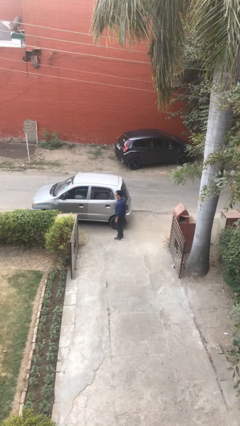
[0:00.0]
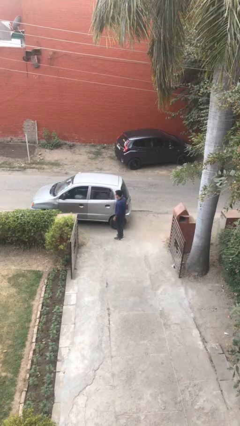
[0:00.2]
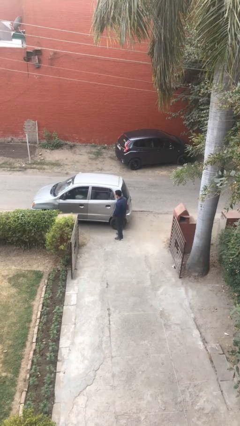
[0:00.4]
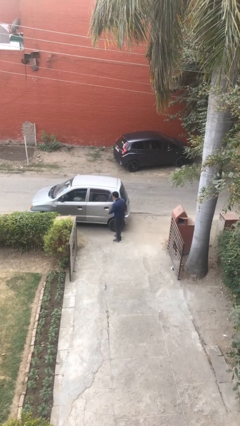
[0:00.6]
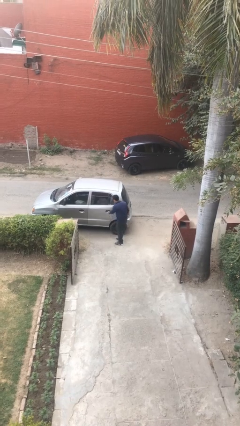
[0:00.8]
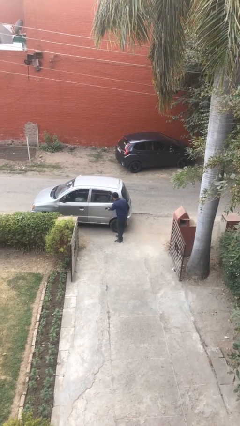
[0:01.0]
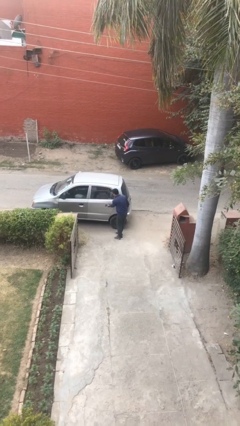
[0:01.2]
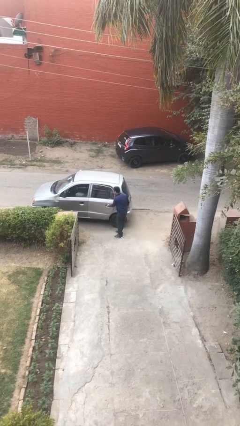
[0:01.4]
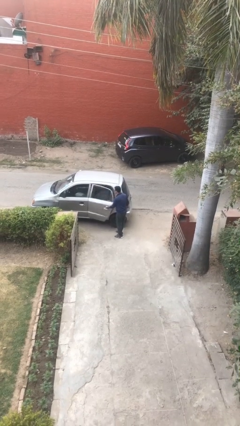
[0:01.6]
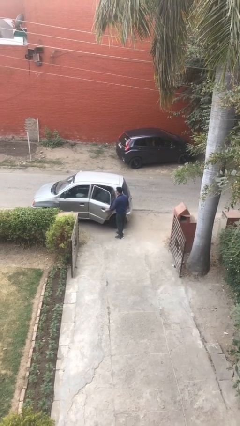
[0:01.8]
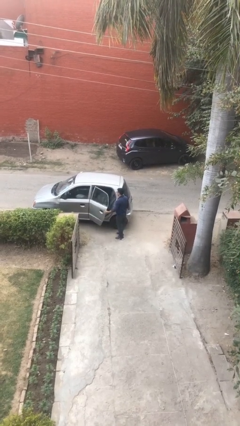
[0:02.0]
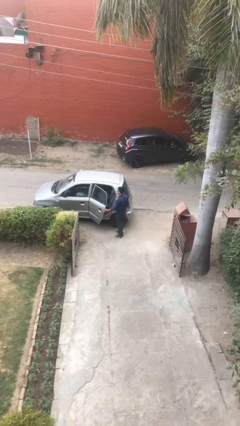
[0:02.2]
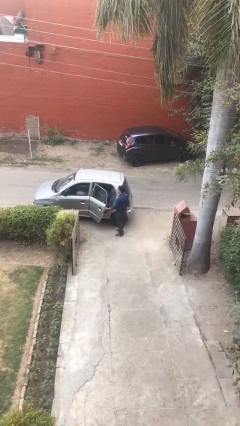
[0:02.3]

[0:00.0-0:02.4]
person opens car door

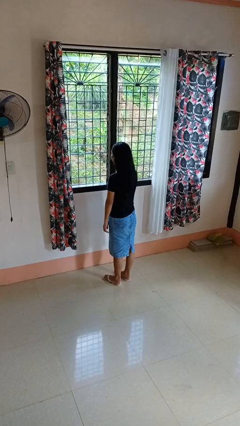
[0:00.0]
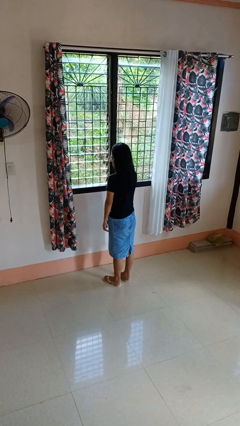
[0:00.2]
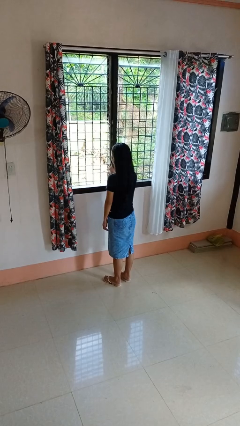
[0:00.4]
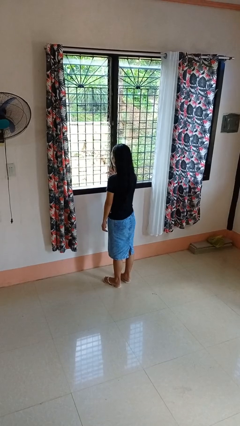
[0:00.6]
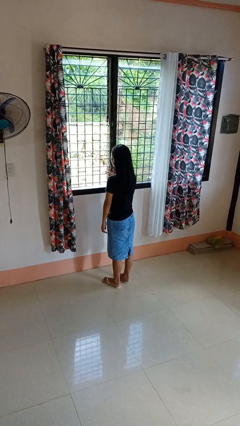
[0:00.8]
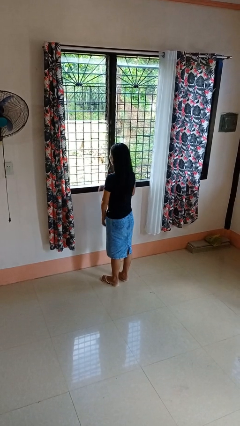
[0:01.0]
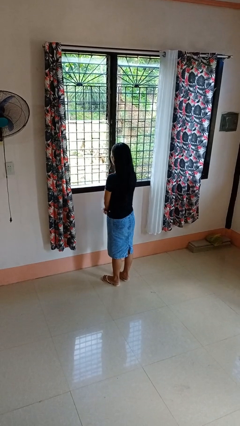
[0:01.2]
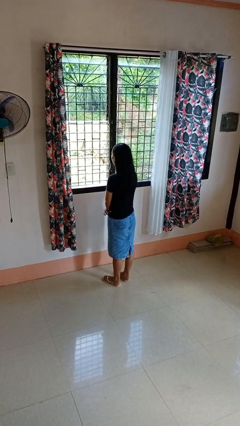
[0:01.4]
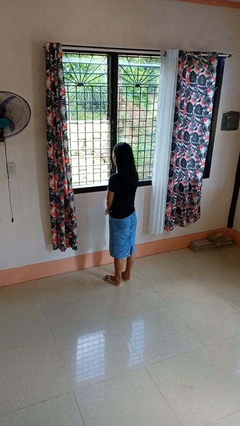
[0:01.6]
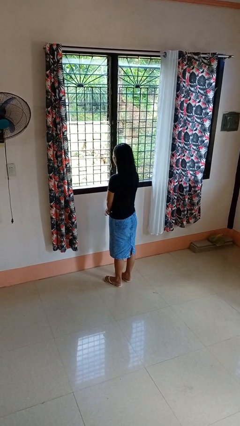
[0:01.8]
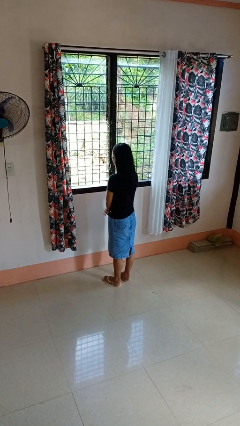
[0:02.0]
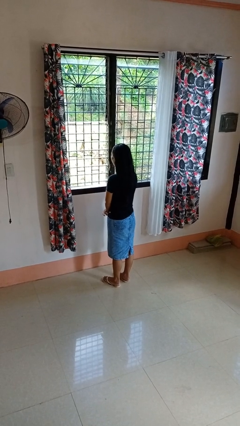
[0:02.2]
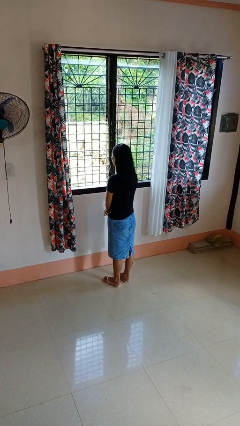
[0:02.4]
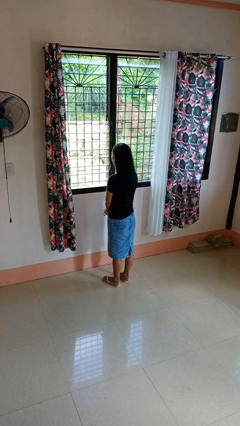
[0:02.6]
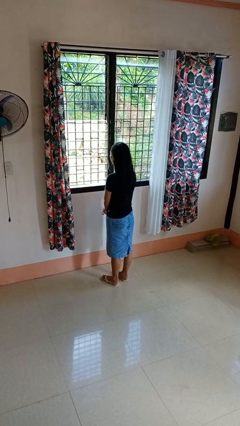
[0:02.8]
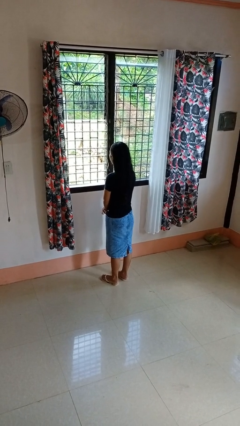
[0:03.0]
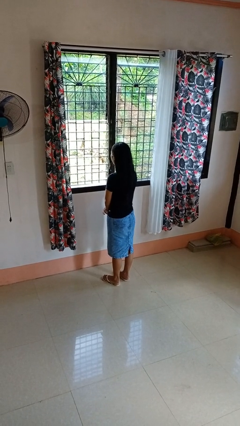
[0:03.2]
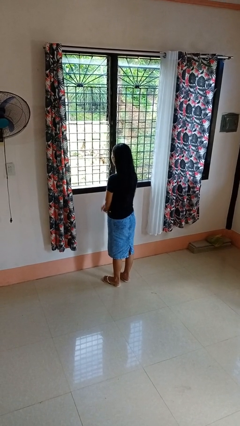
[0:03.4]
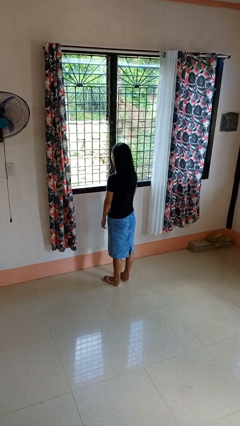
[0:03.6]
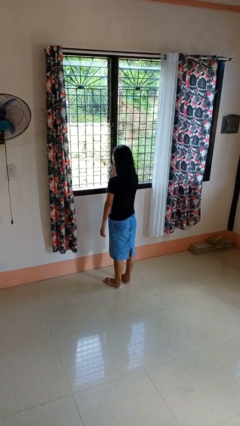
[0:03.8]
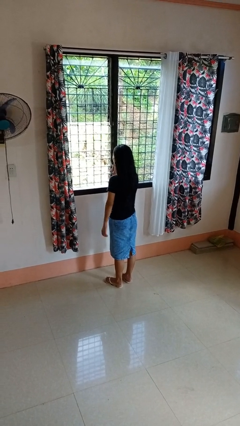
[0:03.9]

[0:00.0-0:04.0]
person opens home window

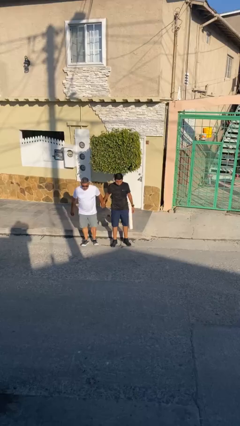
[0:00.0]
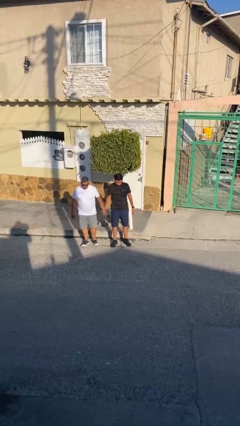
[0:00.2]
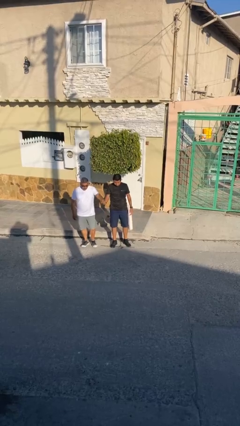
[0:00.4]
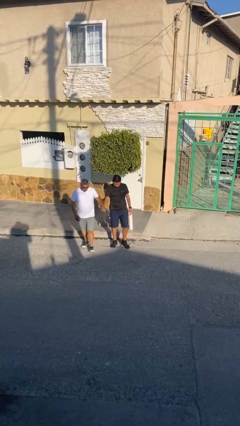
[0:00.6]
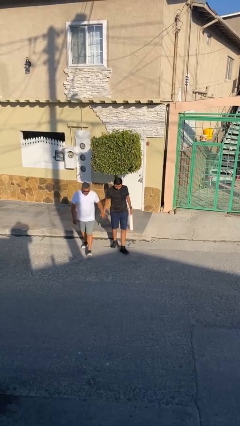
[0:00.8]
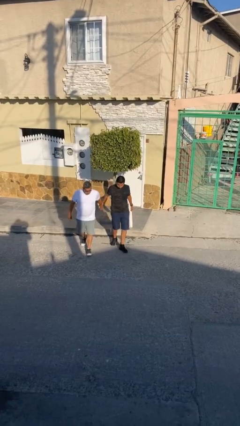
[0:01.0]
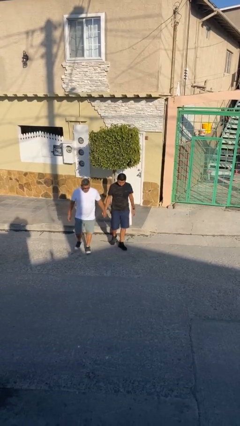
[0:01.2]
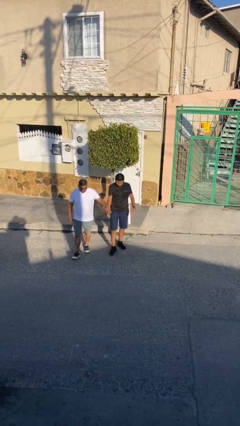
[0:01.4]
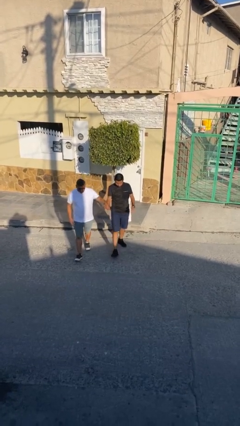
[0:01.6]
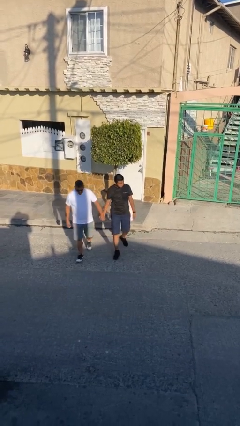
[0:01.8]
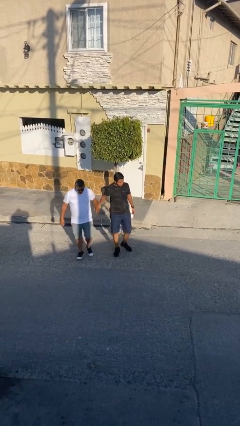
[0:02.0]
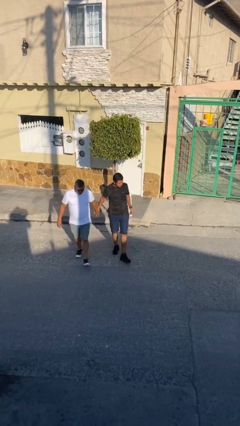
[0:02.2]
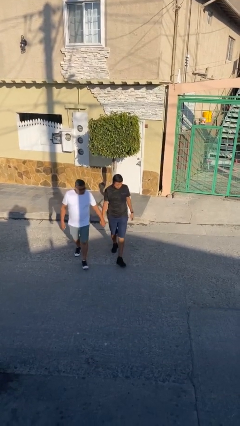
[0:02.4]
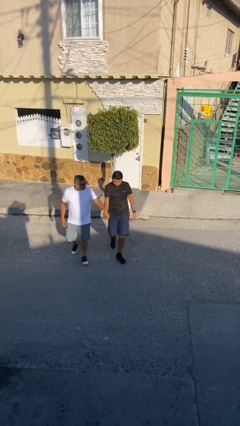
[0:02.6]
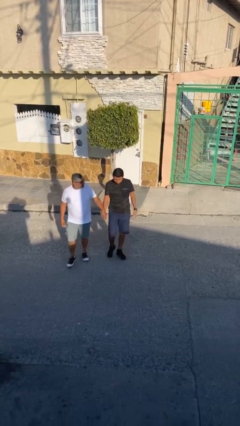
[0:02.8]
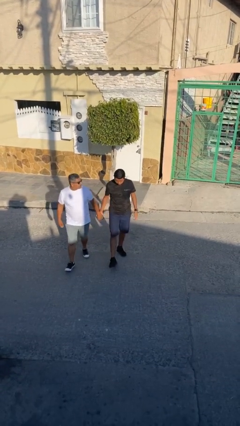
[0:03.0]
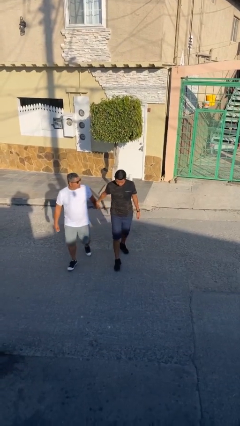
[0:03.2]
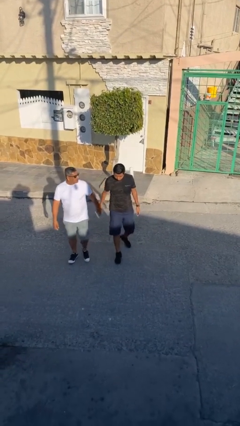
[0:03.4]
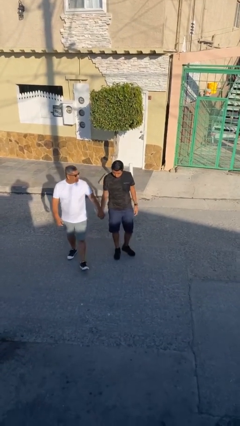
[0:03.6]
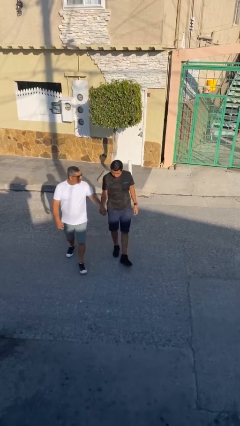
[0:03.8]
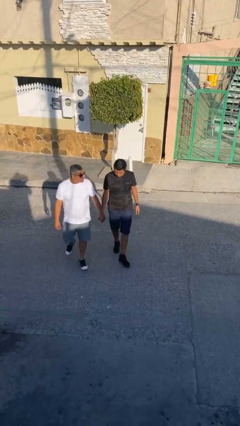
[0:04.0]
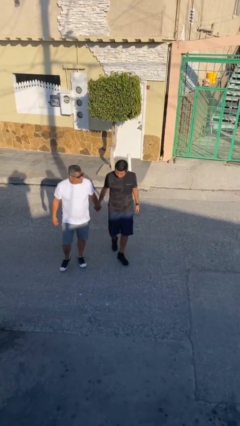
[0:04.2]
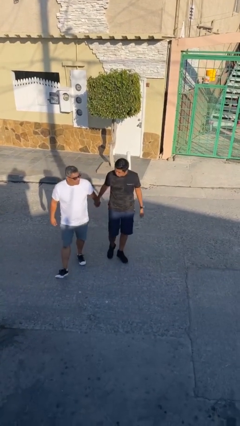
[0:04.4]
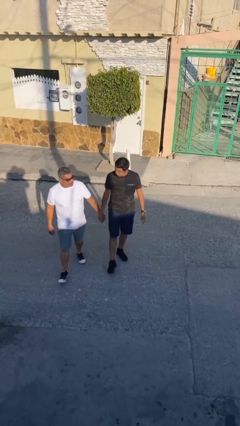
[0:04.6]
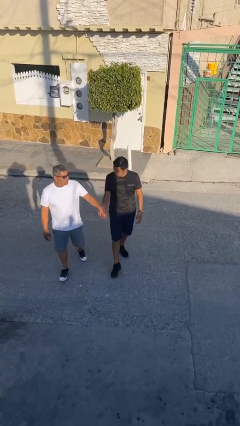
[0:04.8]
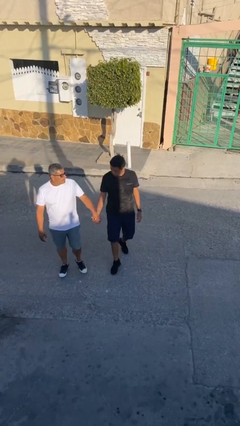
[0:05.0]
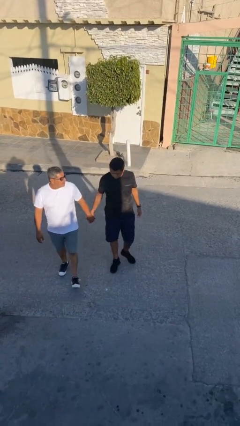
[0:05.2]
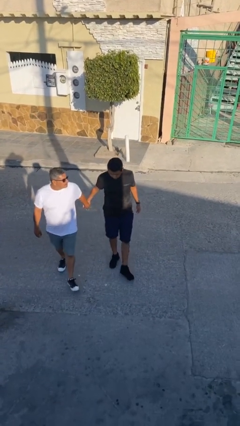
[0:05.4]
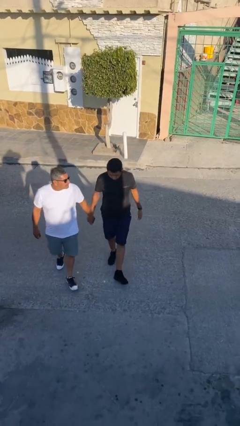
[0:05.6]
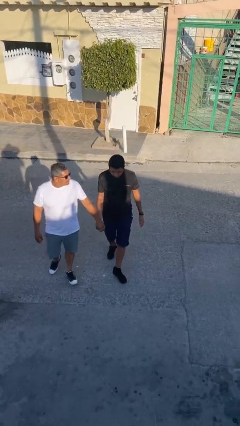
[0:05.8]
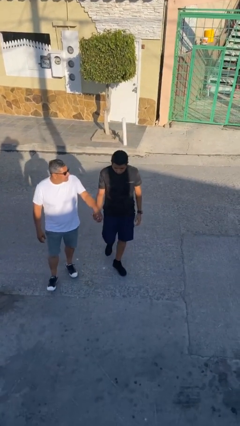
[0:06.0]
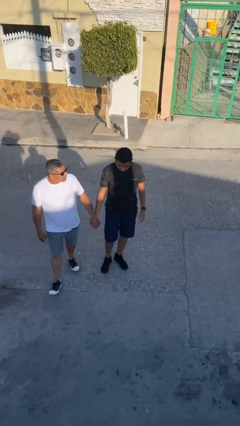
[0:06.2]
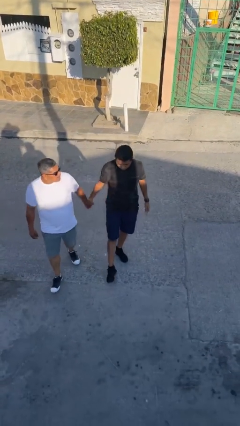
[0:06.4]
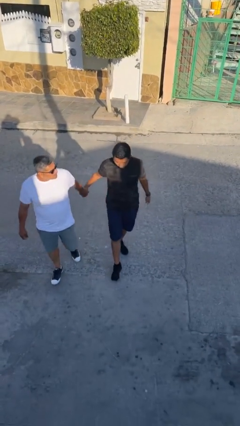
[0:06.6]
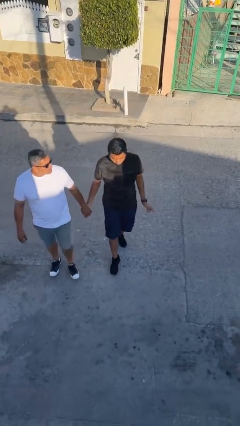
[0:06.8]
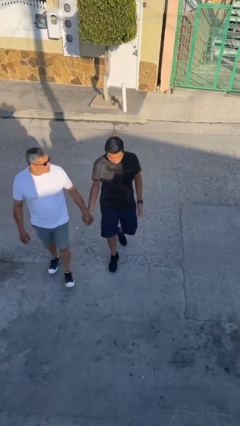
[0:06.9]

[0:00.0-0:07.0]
person holds hand

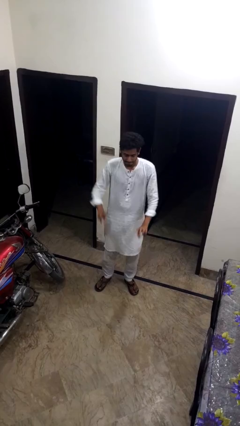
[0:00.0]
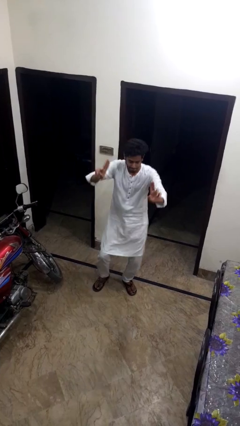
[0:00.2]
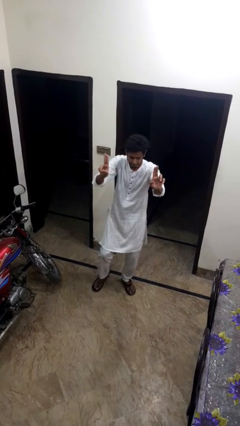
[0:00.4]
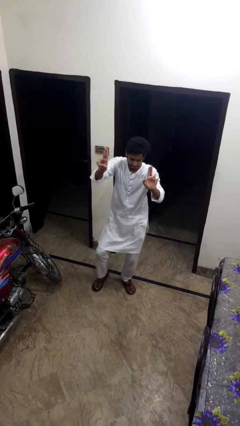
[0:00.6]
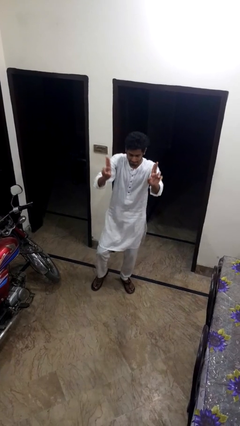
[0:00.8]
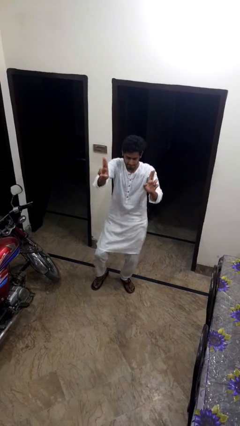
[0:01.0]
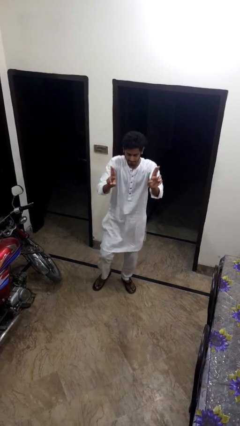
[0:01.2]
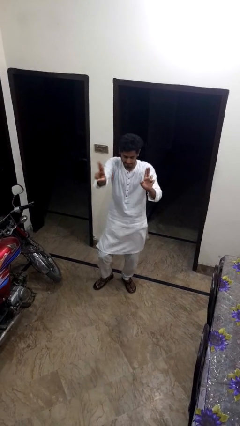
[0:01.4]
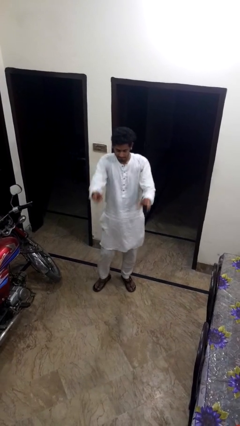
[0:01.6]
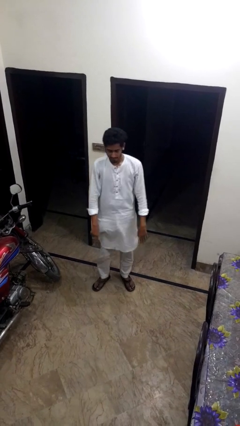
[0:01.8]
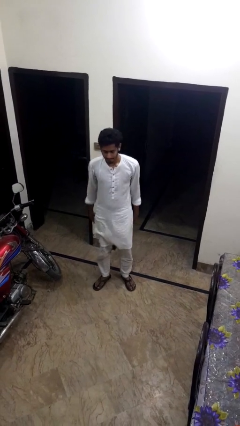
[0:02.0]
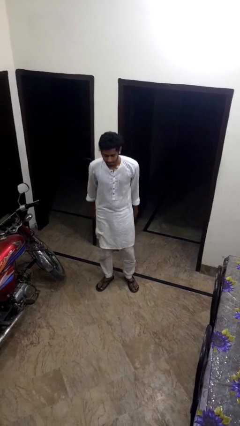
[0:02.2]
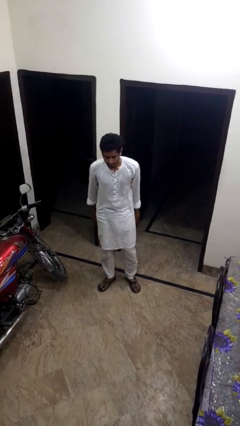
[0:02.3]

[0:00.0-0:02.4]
person dances in place

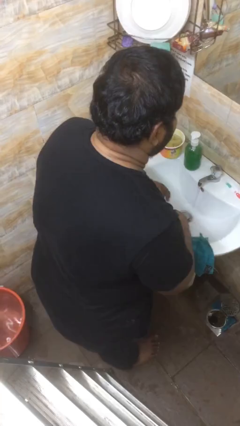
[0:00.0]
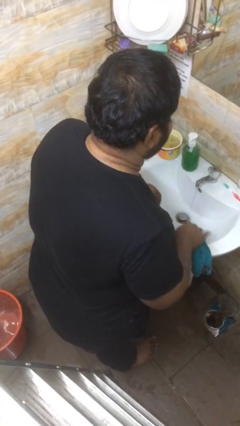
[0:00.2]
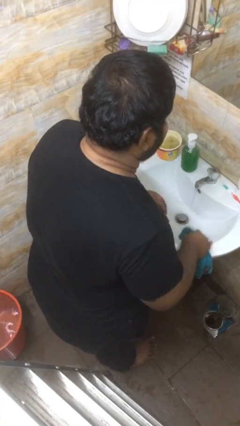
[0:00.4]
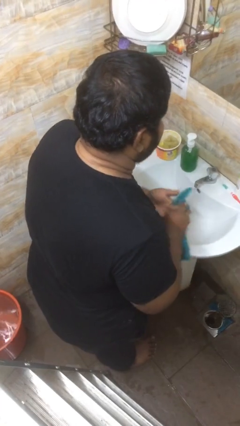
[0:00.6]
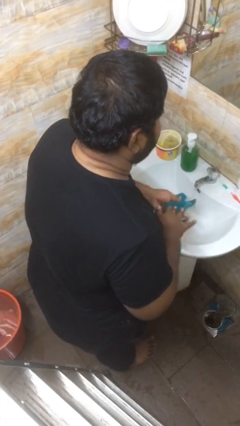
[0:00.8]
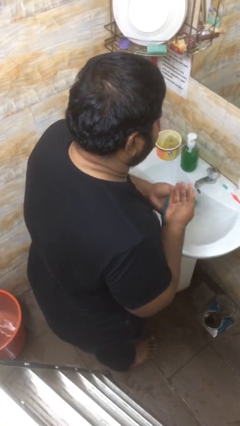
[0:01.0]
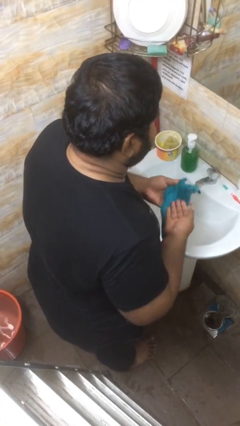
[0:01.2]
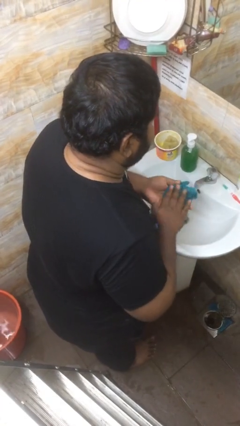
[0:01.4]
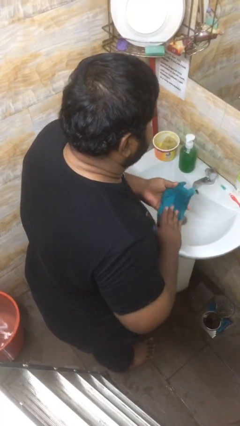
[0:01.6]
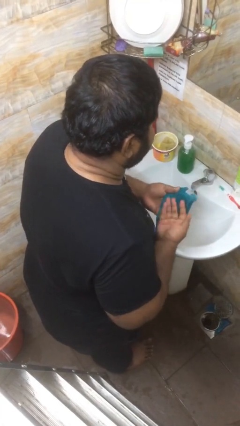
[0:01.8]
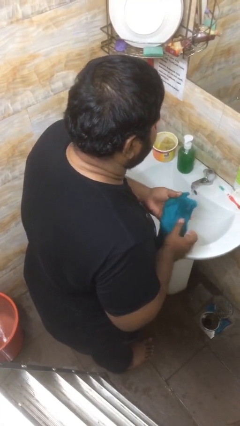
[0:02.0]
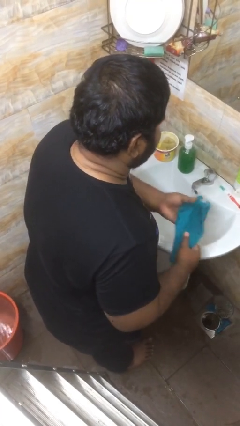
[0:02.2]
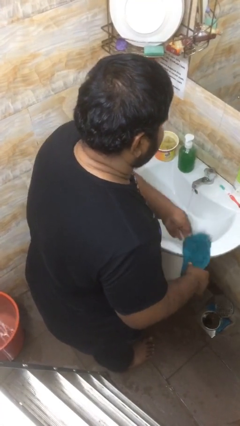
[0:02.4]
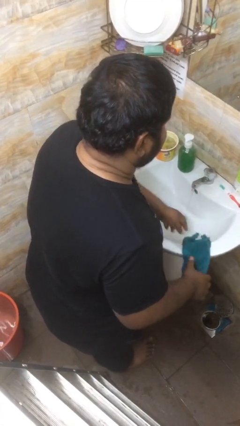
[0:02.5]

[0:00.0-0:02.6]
person dries hands with towel
